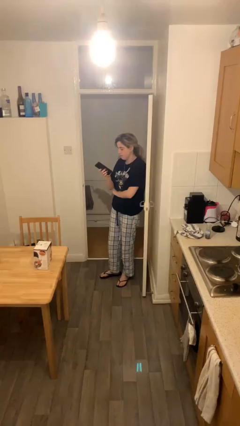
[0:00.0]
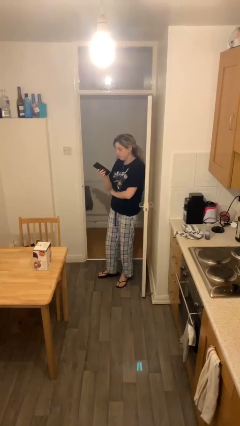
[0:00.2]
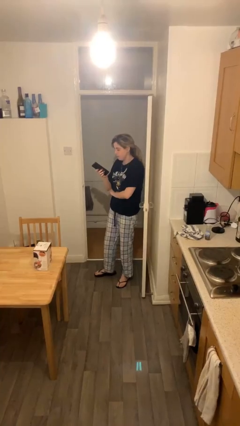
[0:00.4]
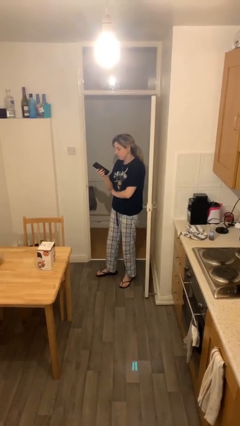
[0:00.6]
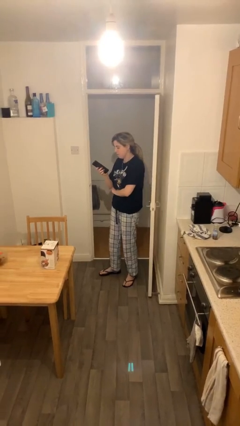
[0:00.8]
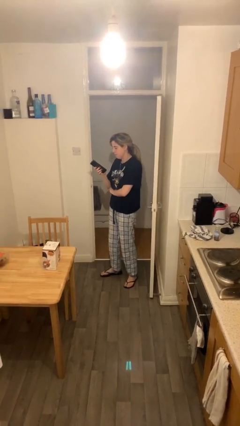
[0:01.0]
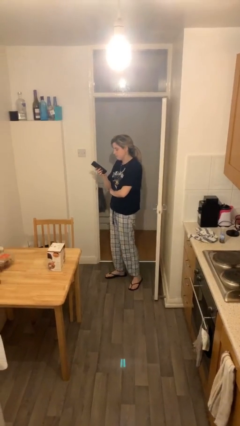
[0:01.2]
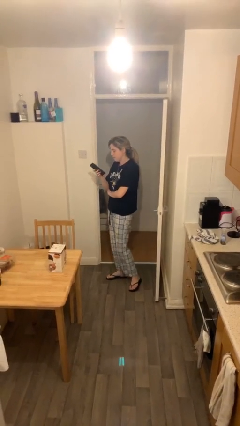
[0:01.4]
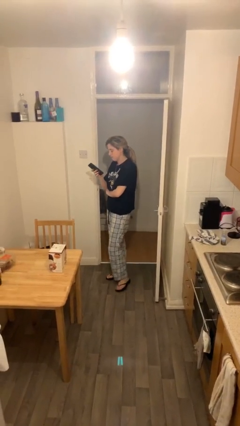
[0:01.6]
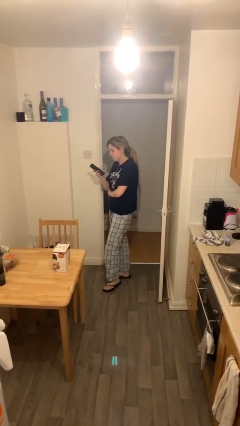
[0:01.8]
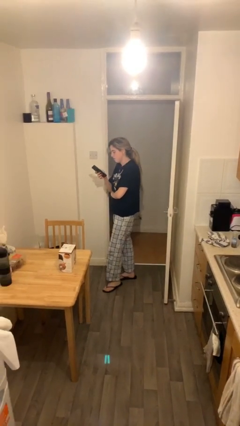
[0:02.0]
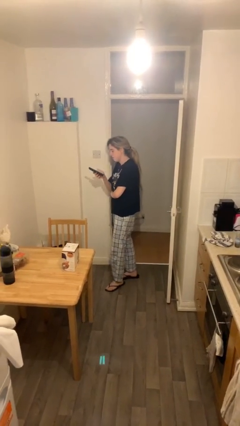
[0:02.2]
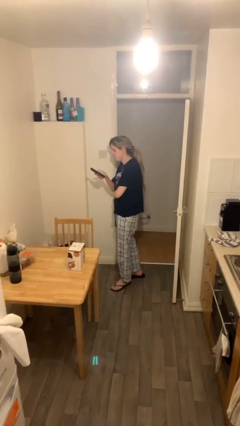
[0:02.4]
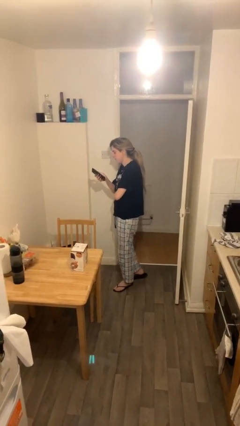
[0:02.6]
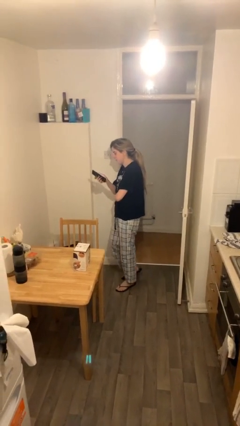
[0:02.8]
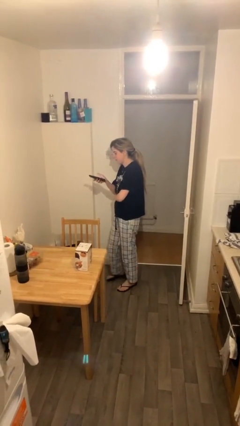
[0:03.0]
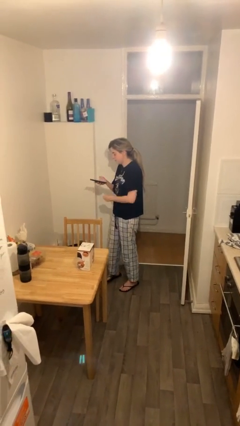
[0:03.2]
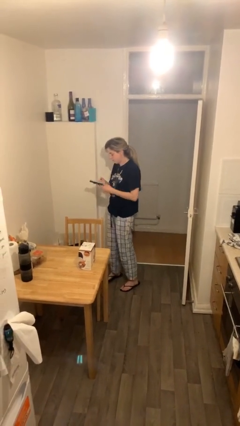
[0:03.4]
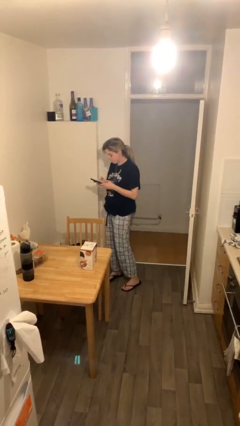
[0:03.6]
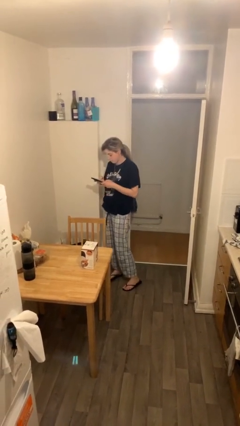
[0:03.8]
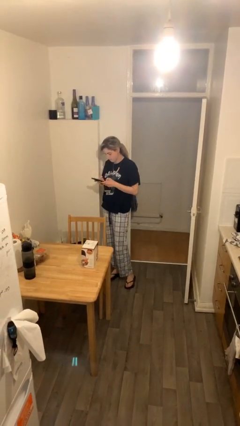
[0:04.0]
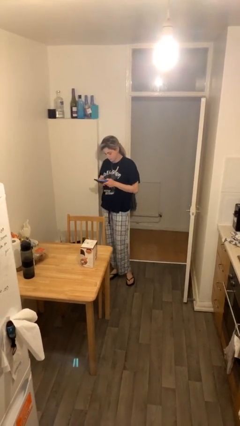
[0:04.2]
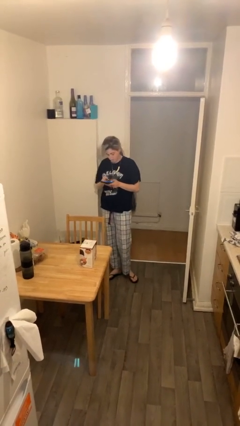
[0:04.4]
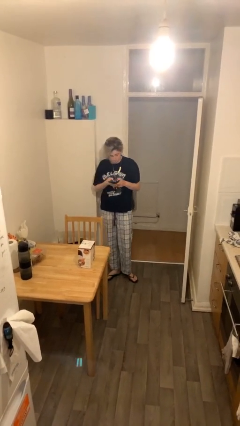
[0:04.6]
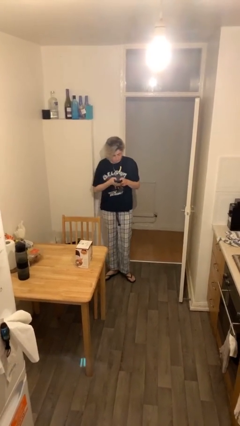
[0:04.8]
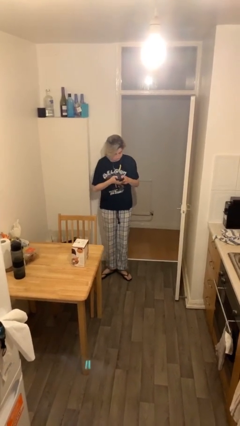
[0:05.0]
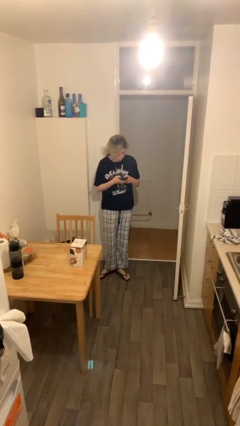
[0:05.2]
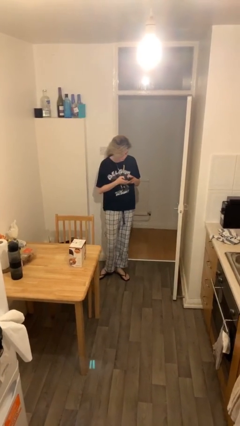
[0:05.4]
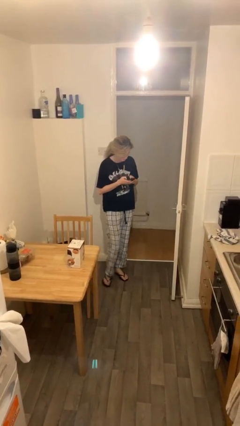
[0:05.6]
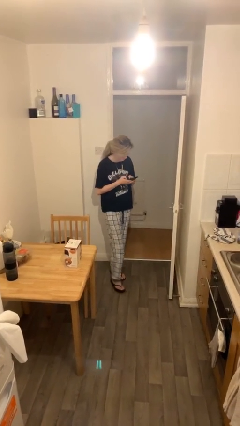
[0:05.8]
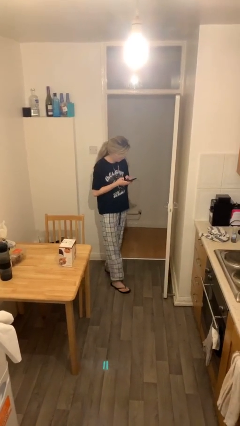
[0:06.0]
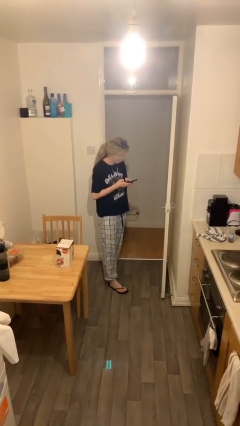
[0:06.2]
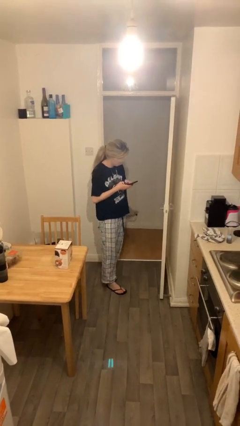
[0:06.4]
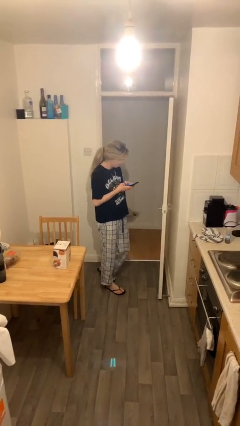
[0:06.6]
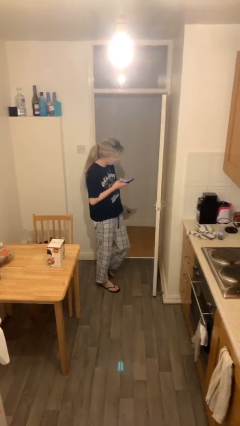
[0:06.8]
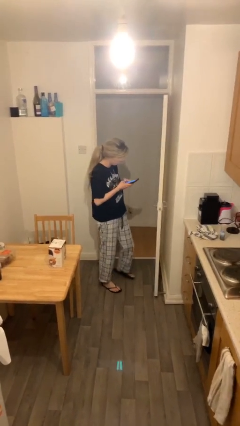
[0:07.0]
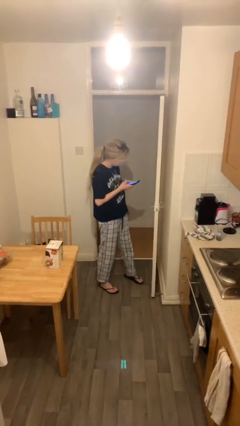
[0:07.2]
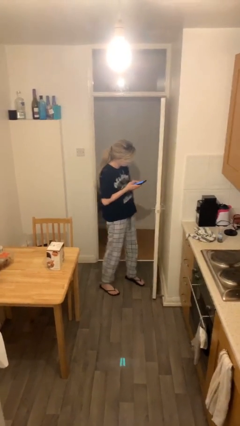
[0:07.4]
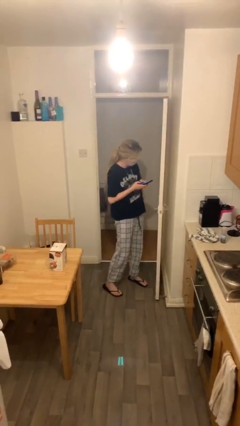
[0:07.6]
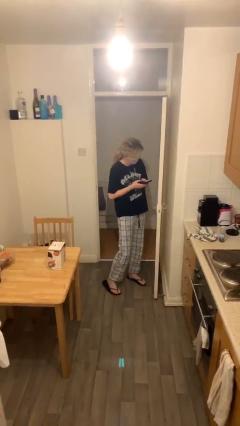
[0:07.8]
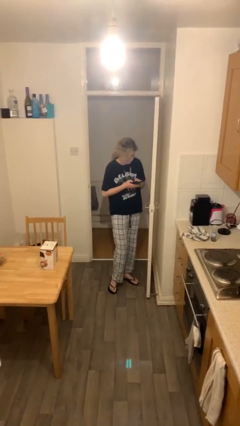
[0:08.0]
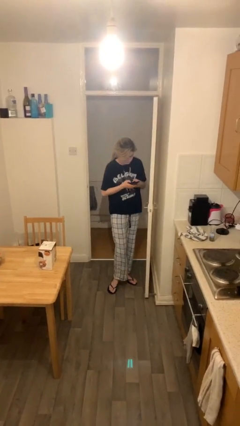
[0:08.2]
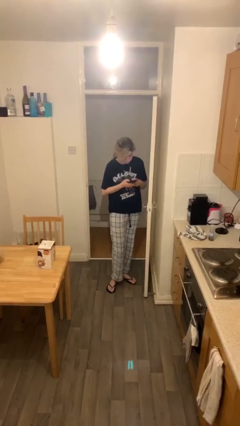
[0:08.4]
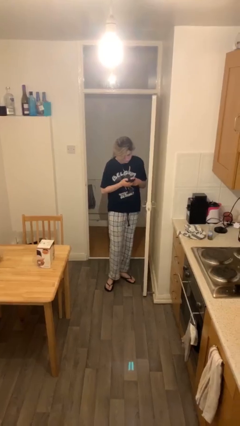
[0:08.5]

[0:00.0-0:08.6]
person texts on phone

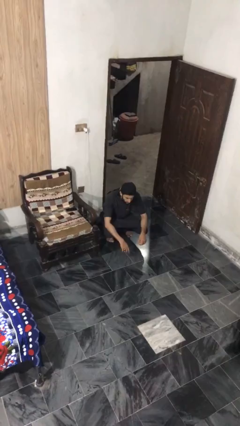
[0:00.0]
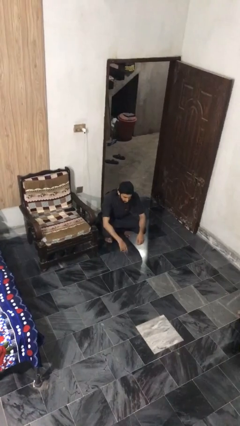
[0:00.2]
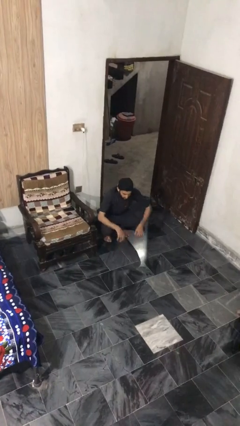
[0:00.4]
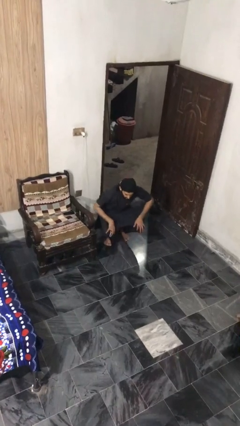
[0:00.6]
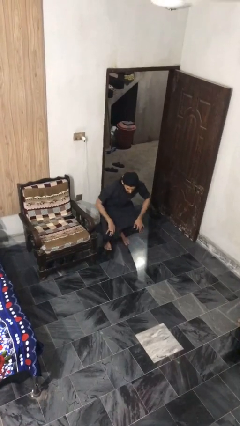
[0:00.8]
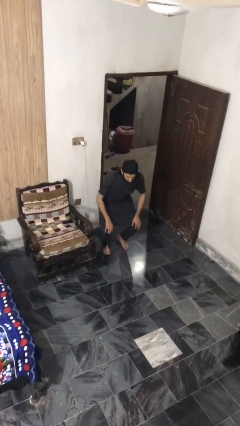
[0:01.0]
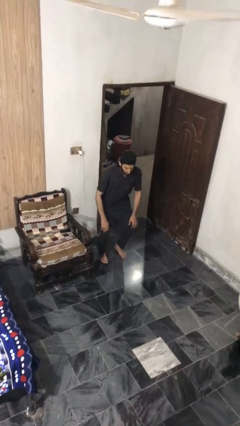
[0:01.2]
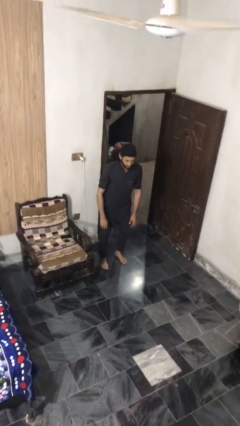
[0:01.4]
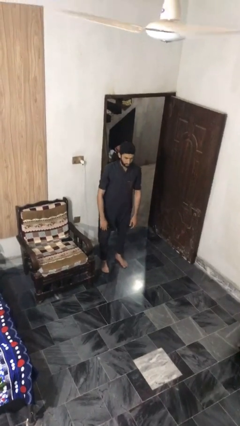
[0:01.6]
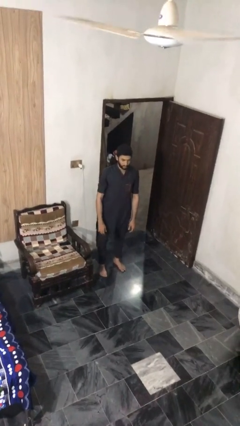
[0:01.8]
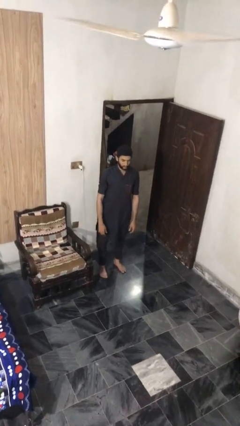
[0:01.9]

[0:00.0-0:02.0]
person stands up

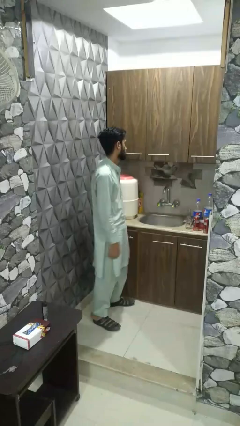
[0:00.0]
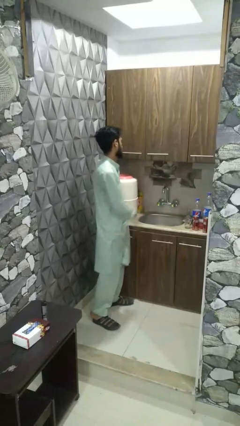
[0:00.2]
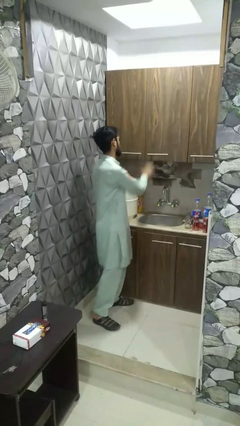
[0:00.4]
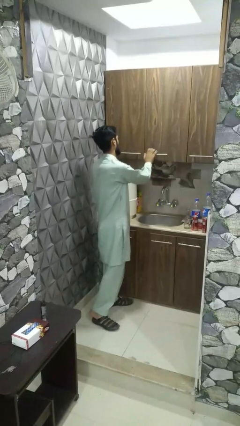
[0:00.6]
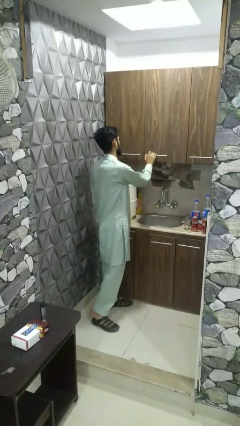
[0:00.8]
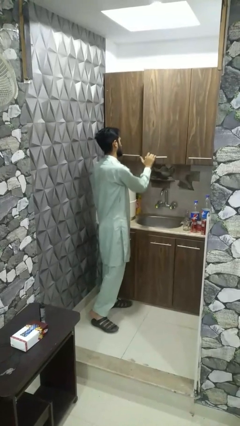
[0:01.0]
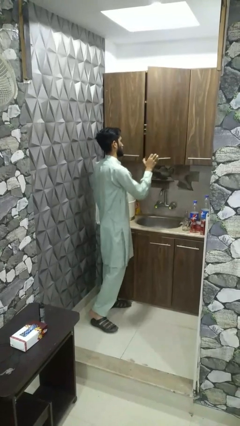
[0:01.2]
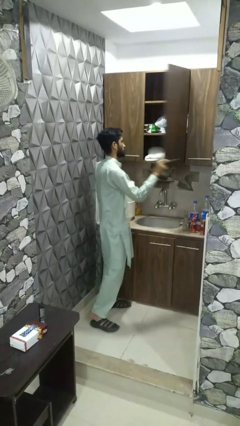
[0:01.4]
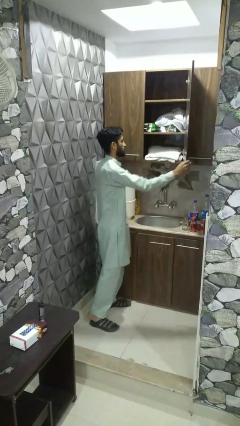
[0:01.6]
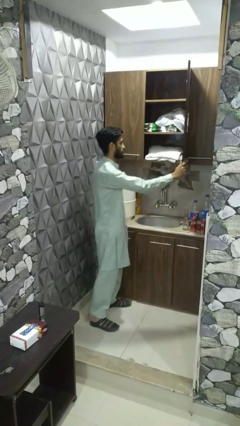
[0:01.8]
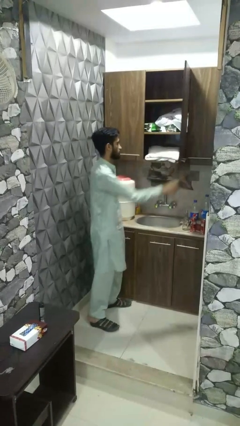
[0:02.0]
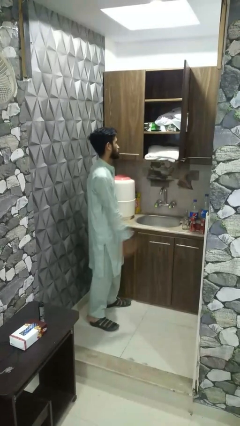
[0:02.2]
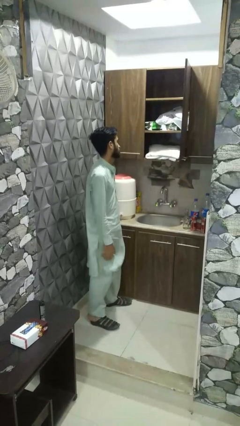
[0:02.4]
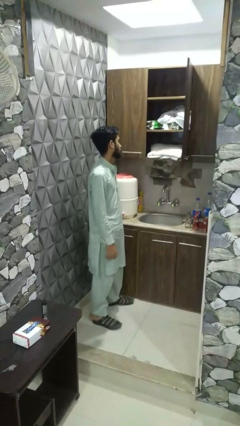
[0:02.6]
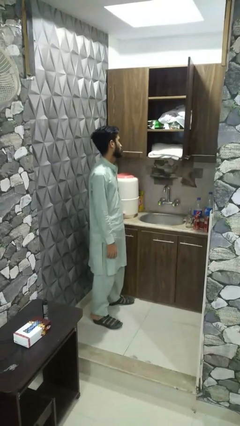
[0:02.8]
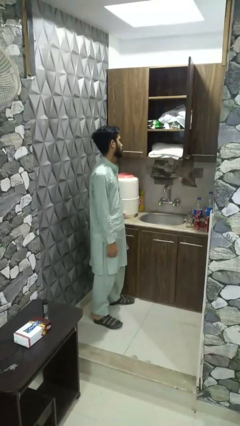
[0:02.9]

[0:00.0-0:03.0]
person opens dresser drawer

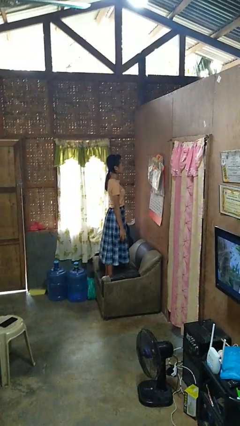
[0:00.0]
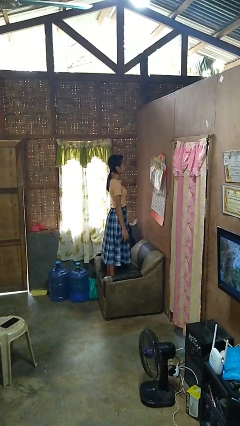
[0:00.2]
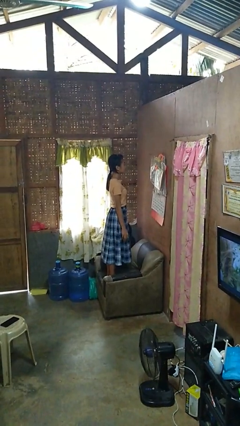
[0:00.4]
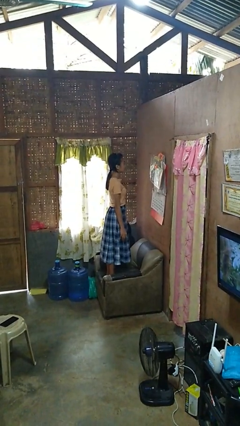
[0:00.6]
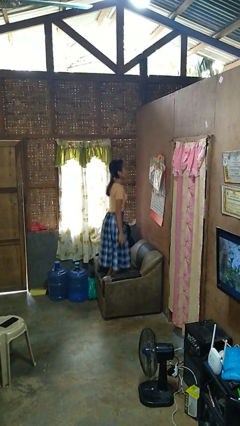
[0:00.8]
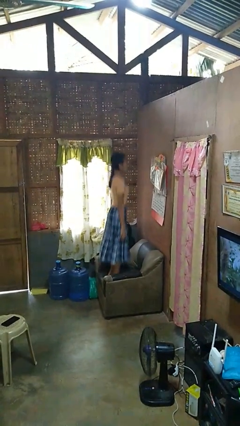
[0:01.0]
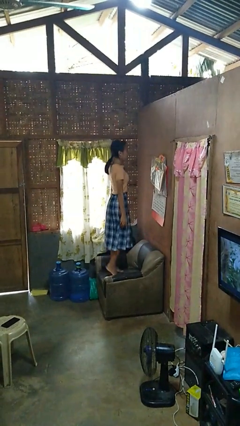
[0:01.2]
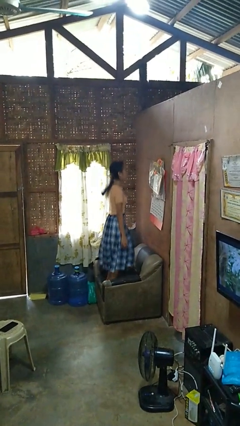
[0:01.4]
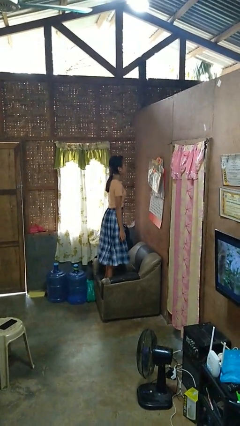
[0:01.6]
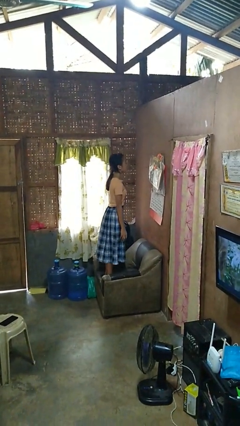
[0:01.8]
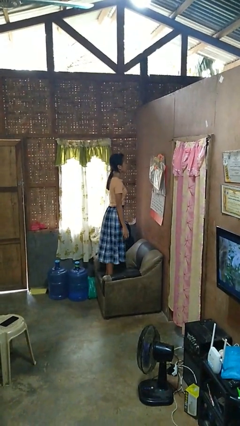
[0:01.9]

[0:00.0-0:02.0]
person jumps on couch

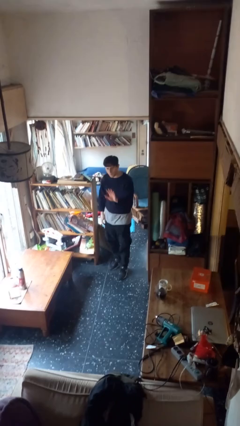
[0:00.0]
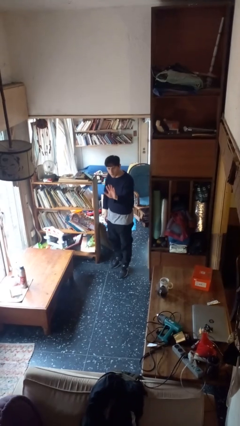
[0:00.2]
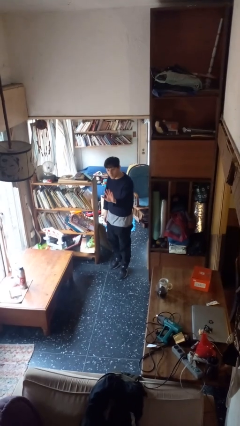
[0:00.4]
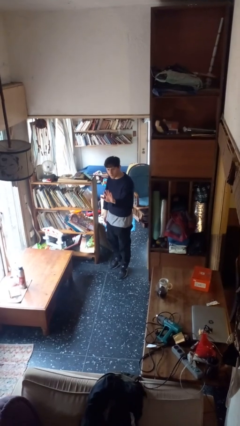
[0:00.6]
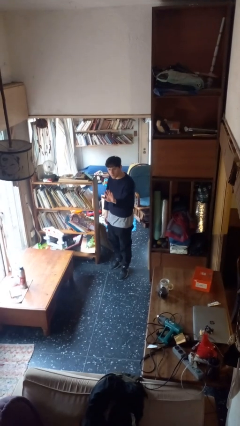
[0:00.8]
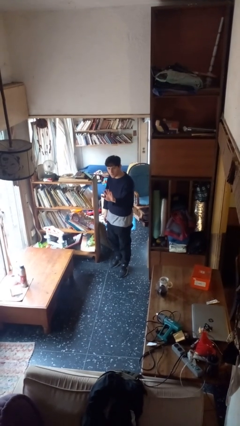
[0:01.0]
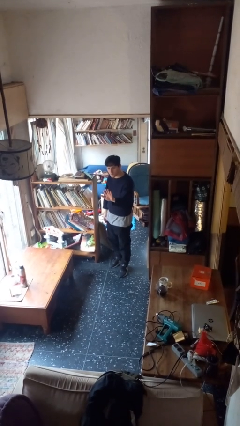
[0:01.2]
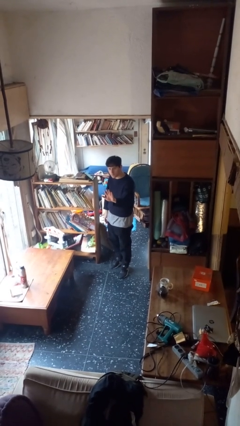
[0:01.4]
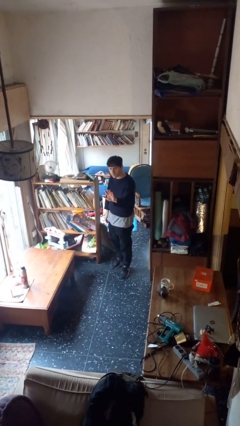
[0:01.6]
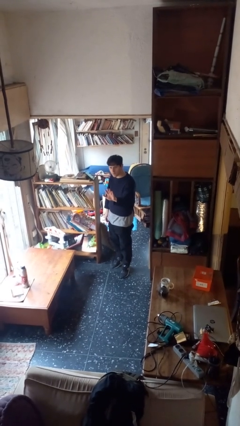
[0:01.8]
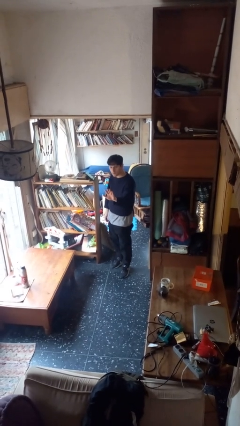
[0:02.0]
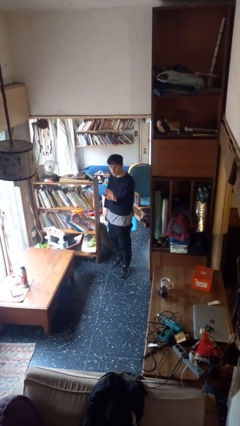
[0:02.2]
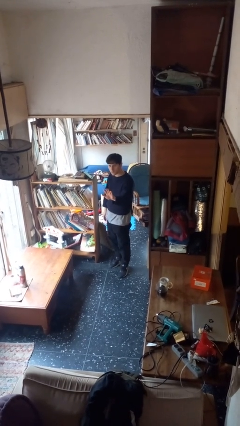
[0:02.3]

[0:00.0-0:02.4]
person gestures stop
